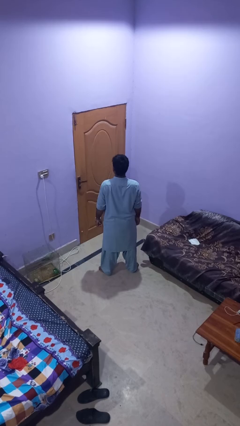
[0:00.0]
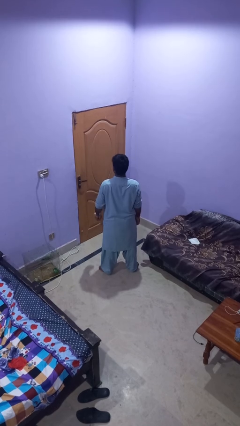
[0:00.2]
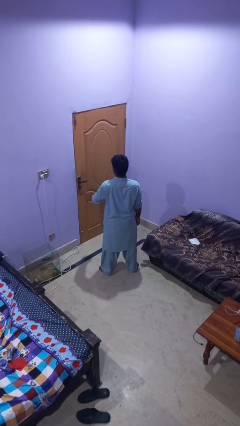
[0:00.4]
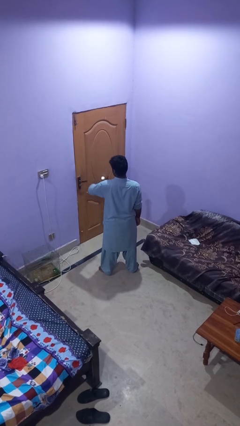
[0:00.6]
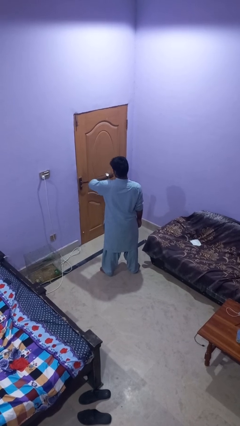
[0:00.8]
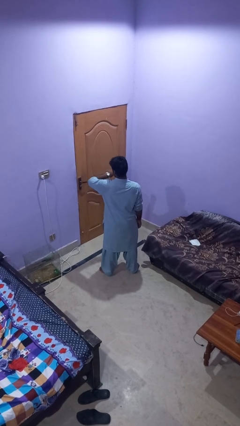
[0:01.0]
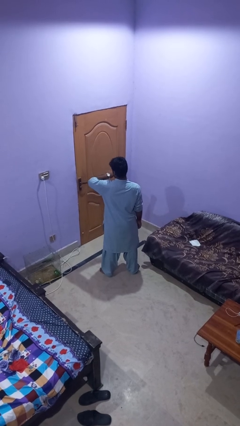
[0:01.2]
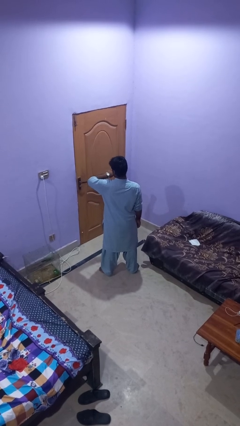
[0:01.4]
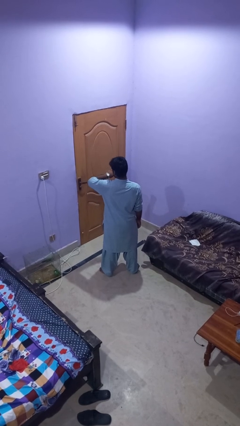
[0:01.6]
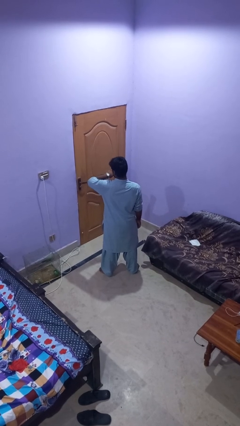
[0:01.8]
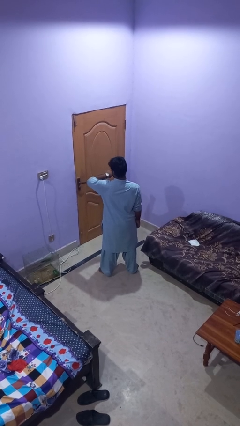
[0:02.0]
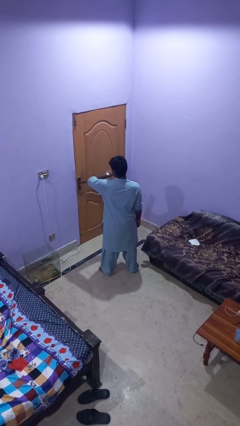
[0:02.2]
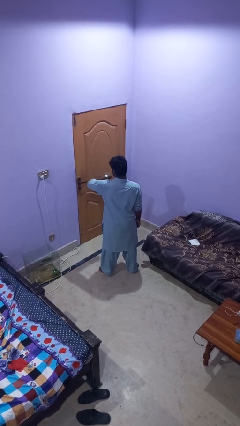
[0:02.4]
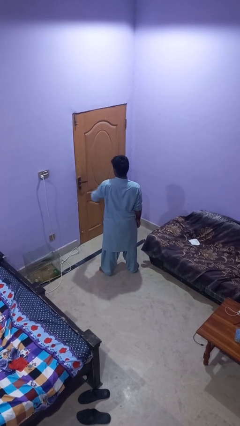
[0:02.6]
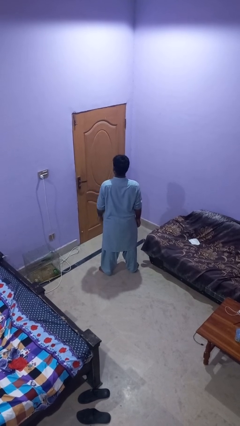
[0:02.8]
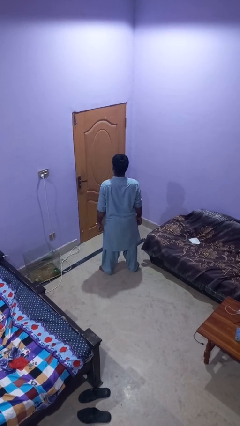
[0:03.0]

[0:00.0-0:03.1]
person looks at wristwatch

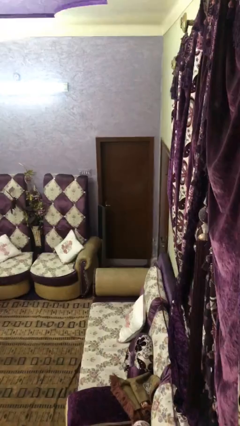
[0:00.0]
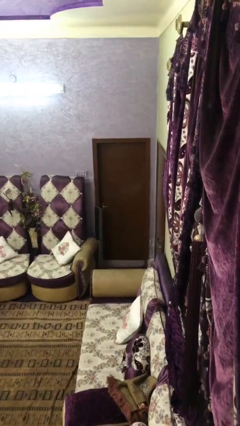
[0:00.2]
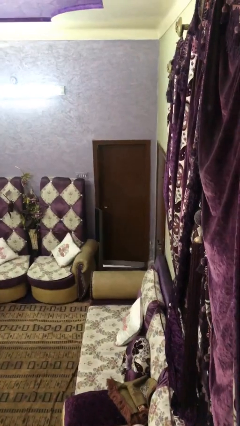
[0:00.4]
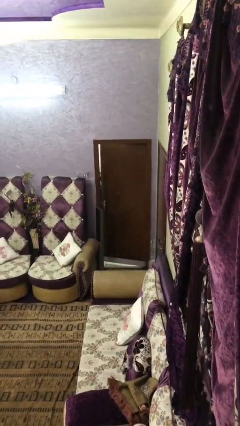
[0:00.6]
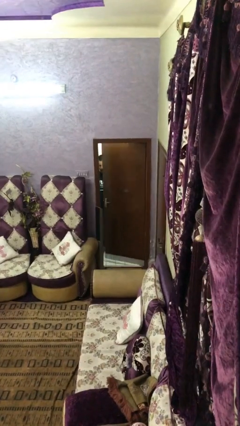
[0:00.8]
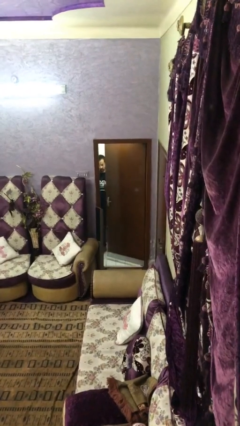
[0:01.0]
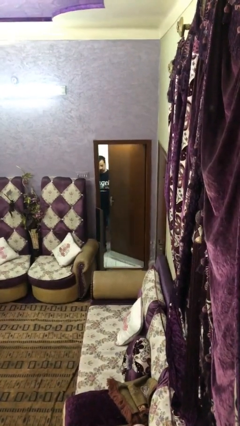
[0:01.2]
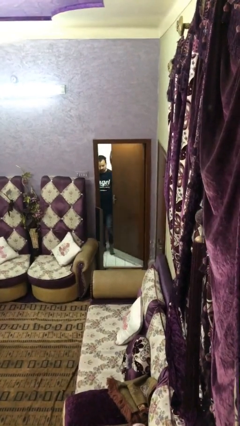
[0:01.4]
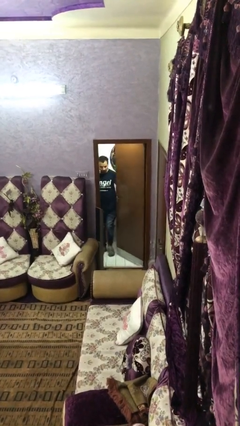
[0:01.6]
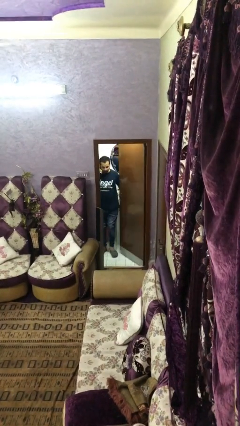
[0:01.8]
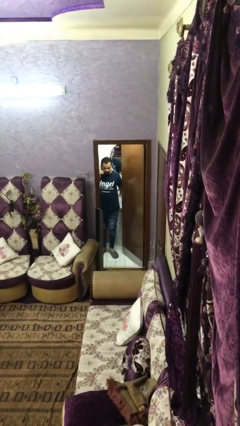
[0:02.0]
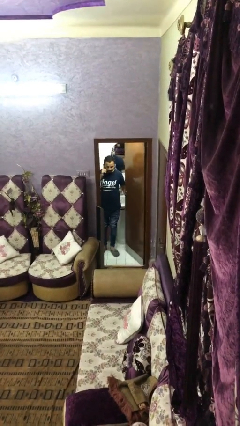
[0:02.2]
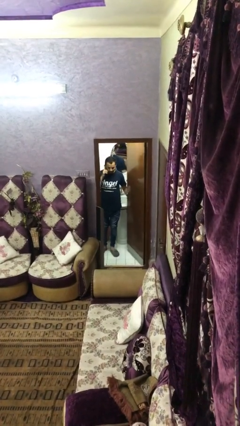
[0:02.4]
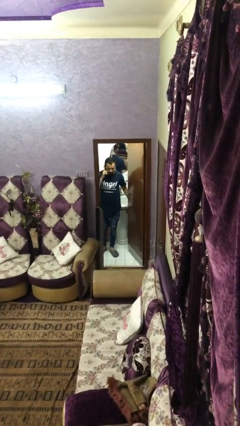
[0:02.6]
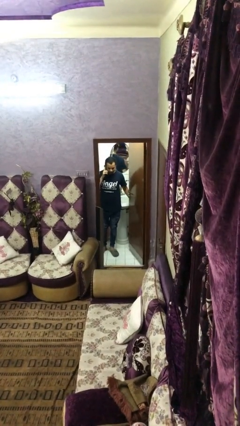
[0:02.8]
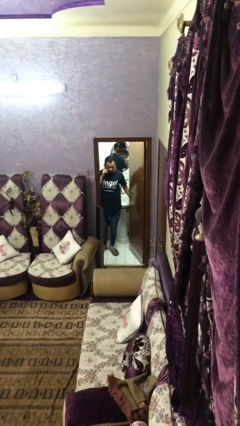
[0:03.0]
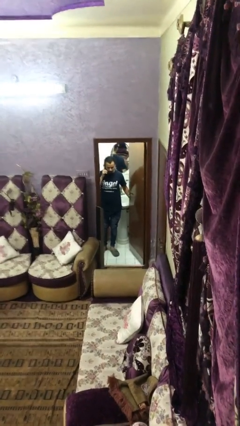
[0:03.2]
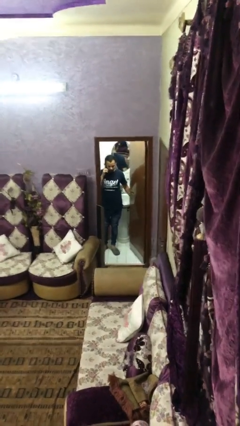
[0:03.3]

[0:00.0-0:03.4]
person opens facility door

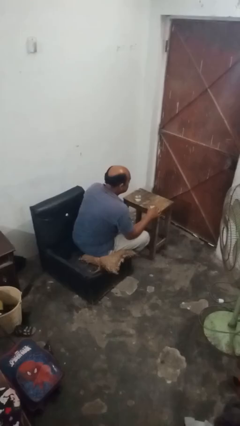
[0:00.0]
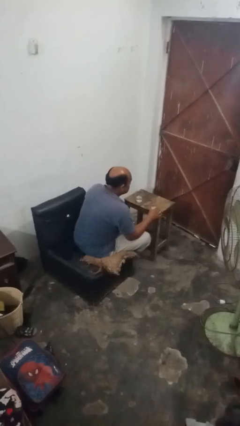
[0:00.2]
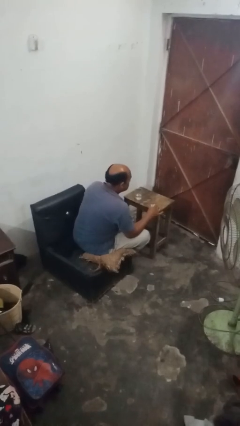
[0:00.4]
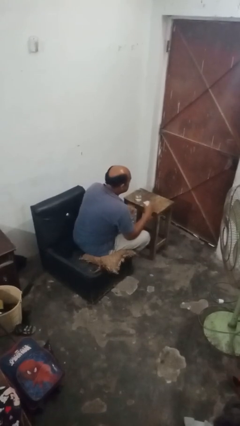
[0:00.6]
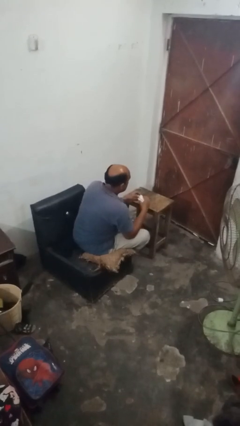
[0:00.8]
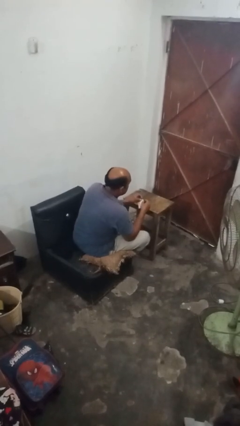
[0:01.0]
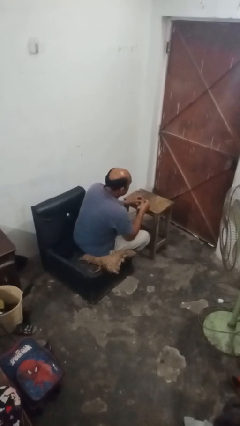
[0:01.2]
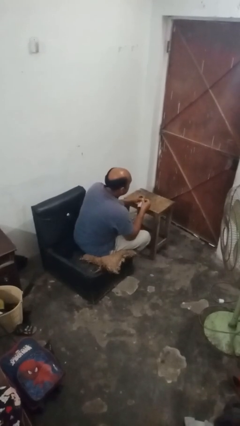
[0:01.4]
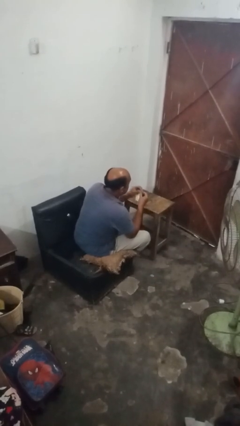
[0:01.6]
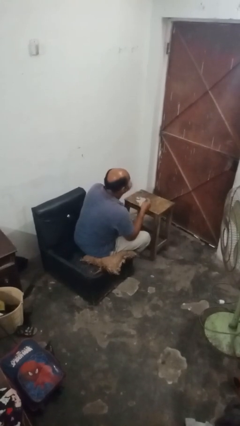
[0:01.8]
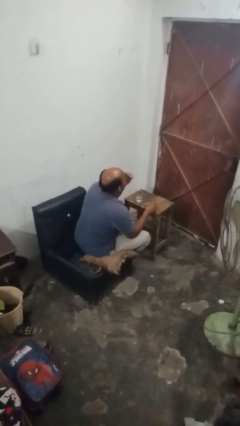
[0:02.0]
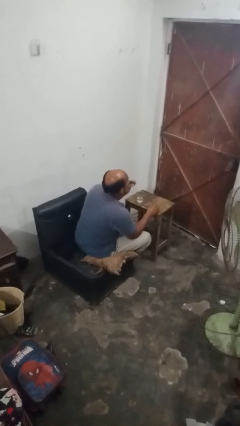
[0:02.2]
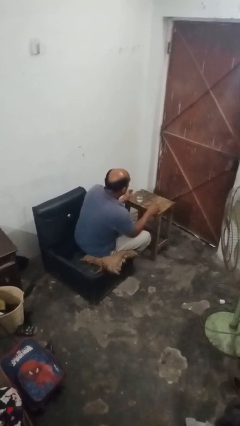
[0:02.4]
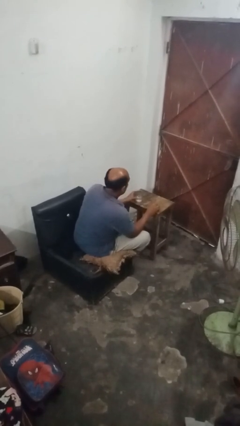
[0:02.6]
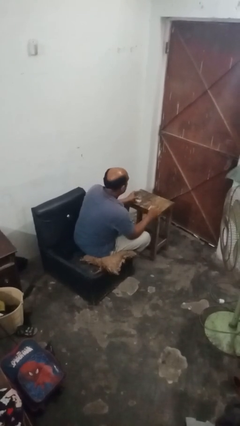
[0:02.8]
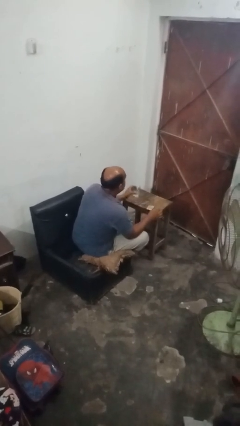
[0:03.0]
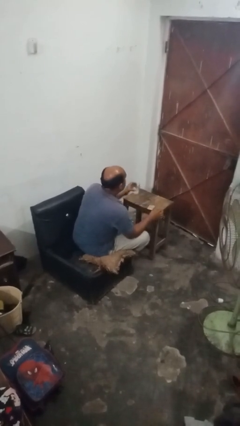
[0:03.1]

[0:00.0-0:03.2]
person takes medicine pills

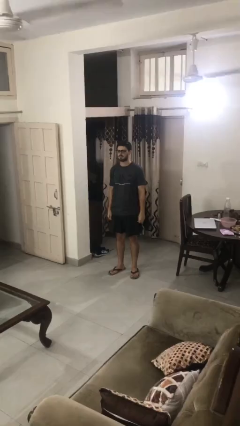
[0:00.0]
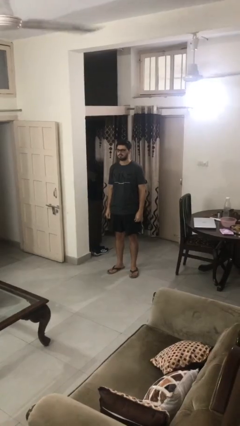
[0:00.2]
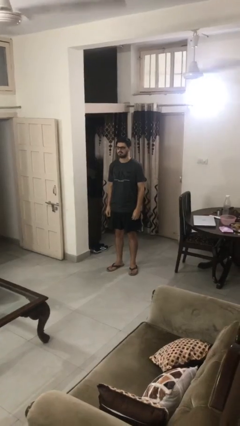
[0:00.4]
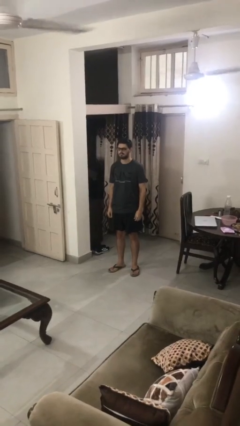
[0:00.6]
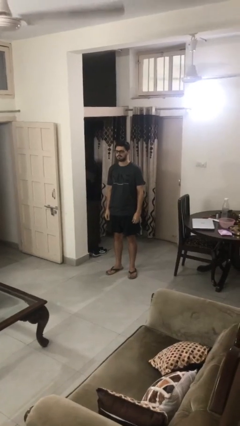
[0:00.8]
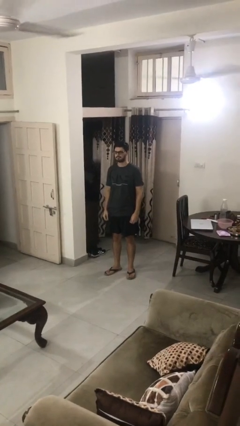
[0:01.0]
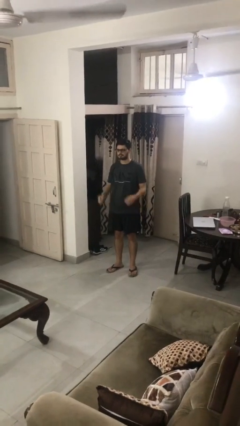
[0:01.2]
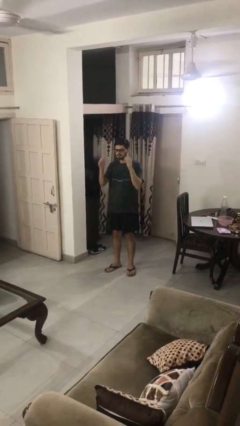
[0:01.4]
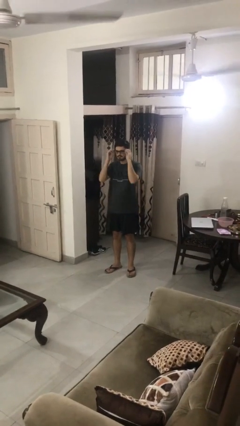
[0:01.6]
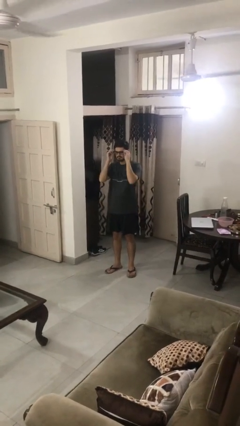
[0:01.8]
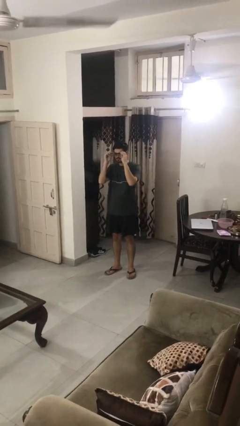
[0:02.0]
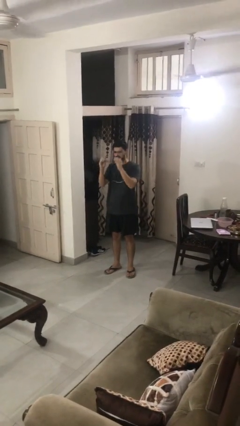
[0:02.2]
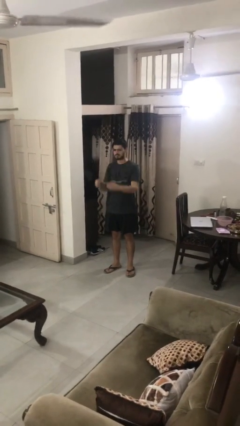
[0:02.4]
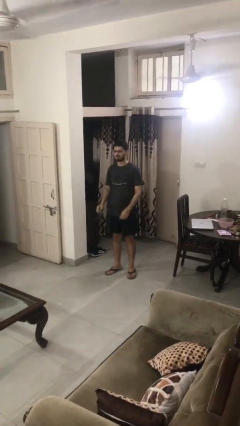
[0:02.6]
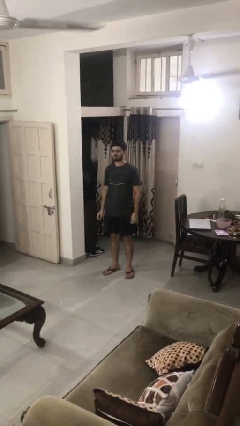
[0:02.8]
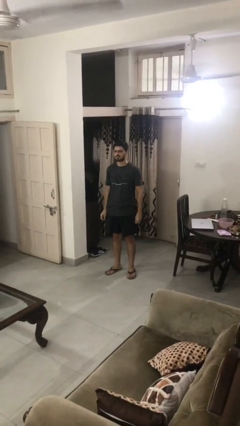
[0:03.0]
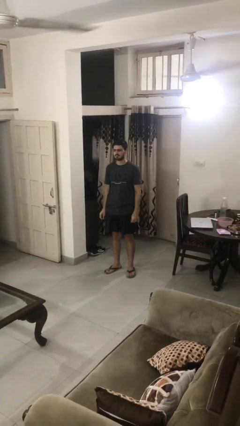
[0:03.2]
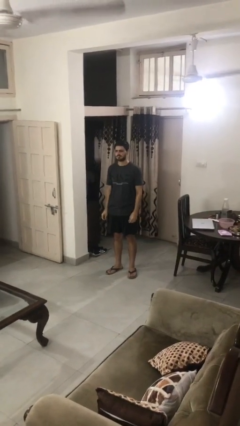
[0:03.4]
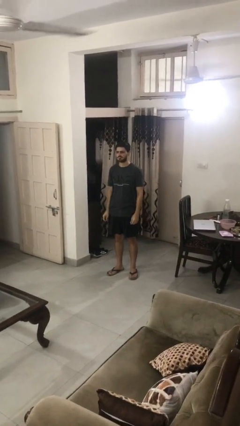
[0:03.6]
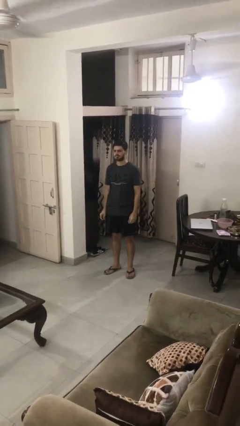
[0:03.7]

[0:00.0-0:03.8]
person takes off glasses

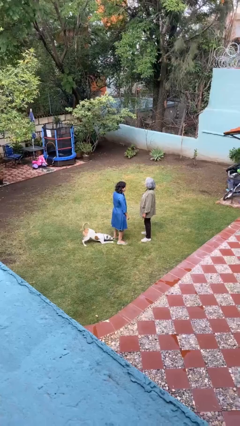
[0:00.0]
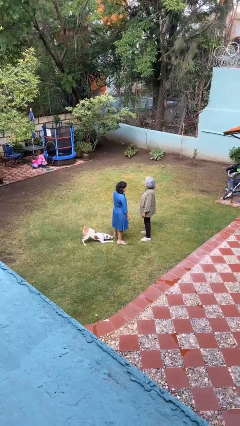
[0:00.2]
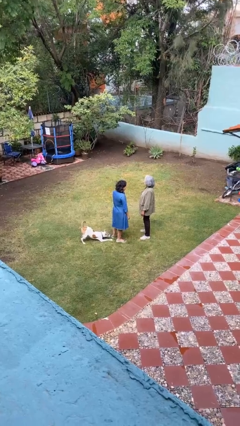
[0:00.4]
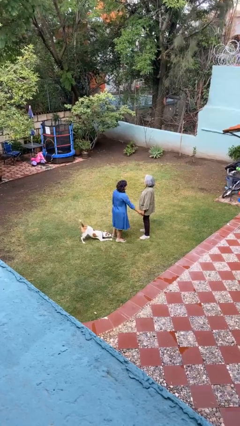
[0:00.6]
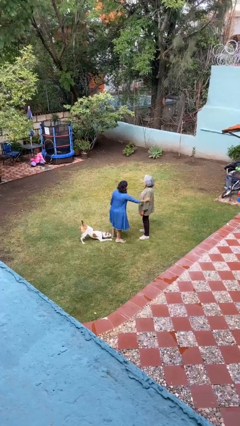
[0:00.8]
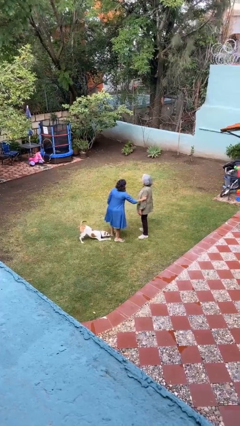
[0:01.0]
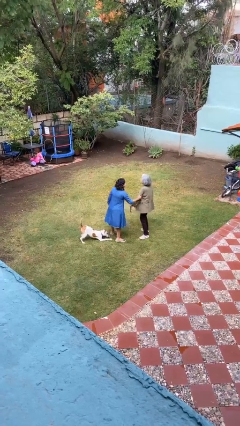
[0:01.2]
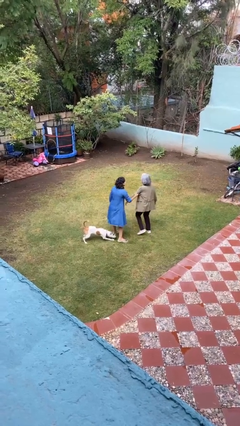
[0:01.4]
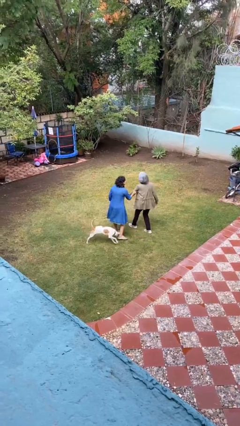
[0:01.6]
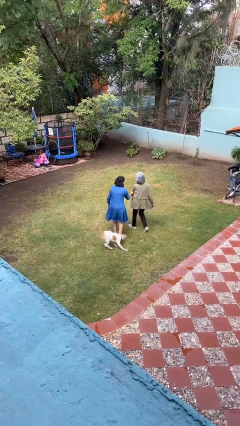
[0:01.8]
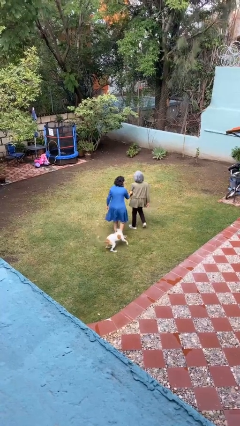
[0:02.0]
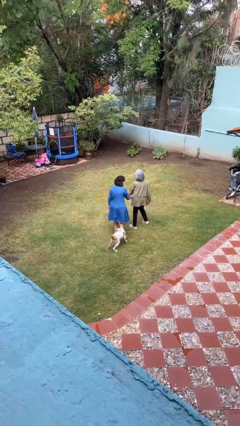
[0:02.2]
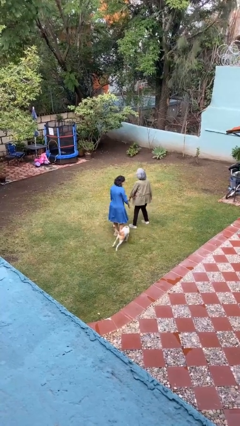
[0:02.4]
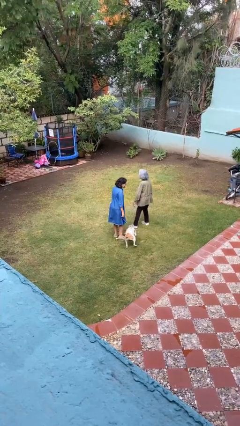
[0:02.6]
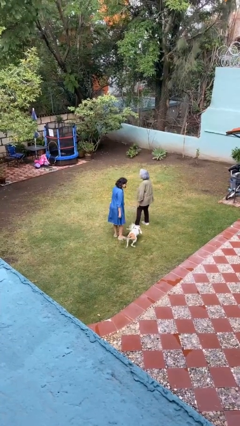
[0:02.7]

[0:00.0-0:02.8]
person grabs person by bicep

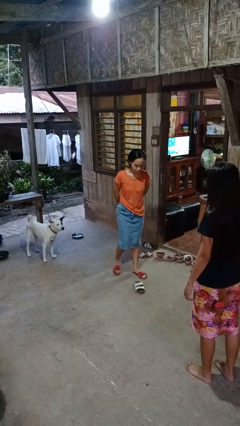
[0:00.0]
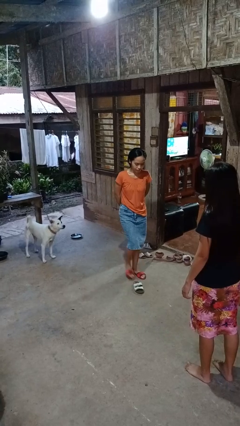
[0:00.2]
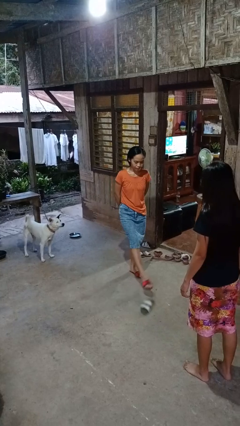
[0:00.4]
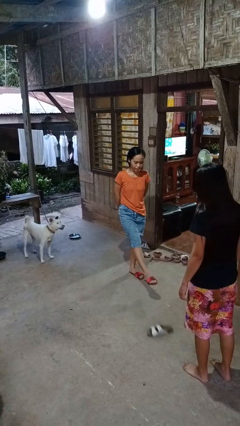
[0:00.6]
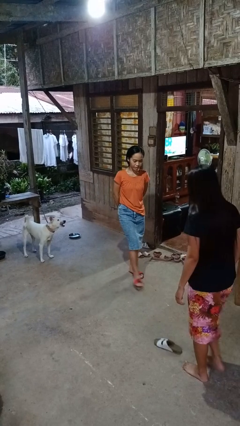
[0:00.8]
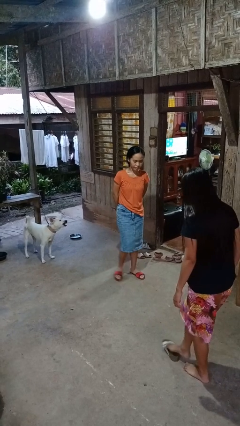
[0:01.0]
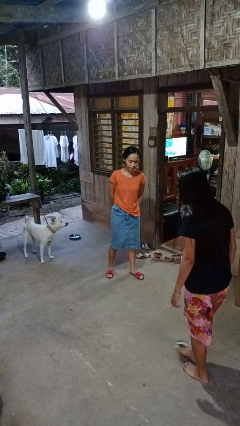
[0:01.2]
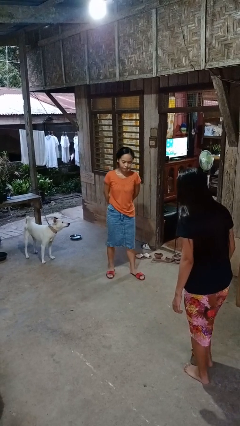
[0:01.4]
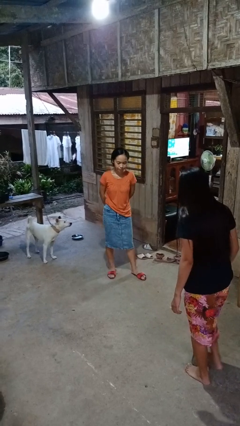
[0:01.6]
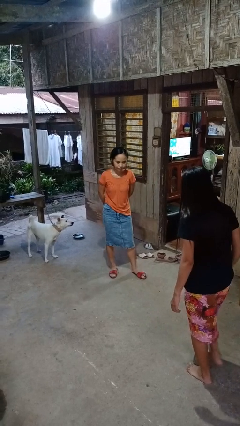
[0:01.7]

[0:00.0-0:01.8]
person kicks object to person
